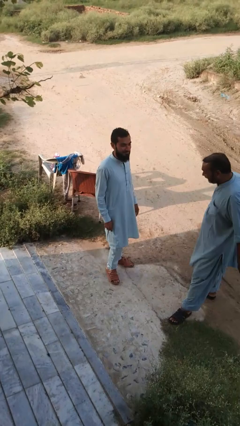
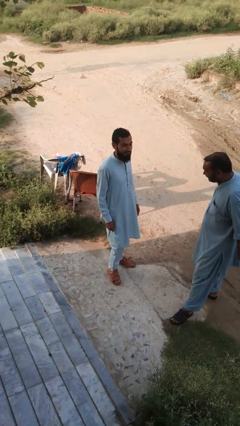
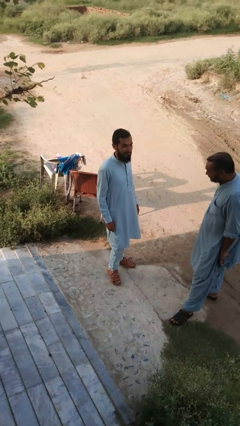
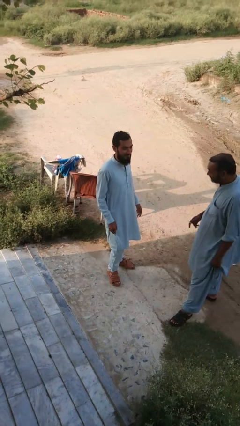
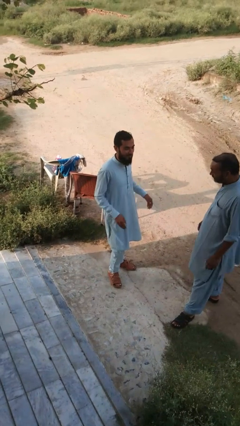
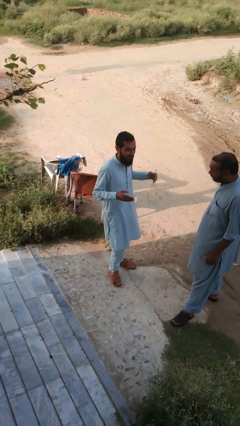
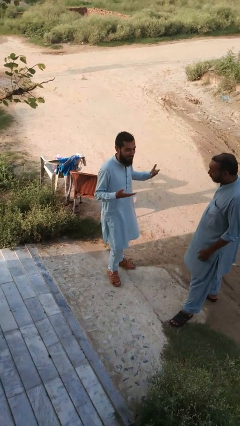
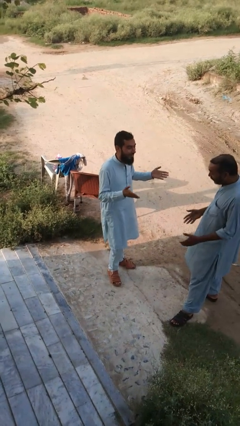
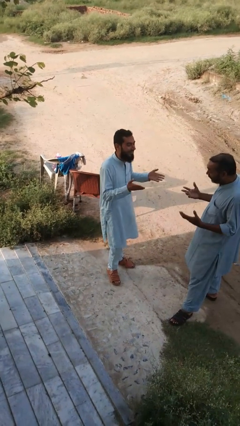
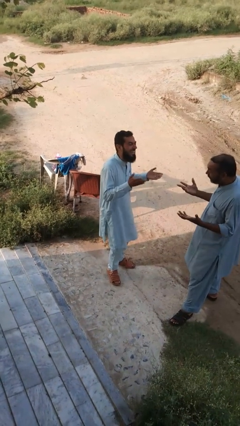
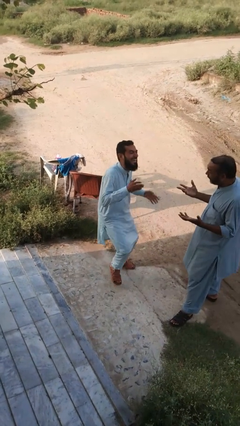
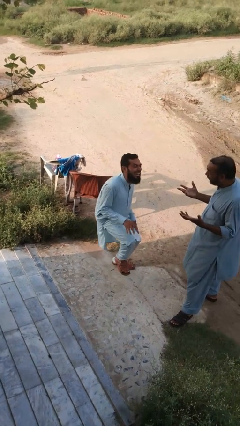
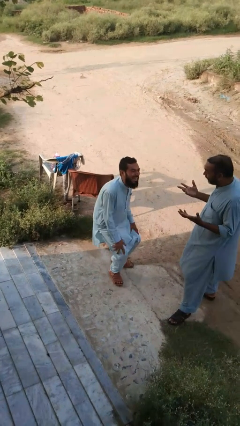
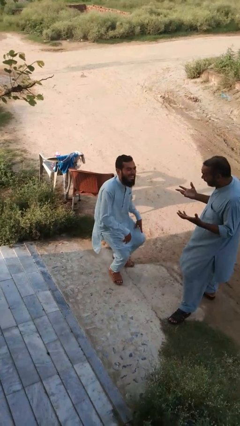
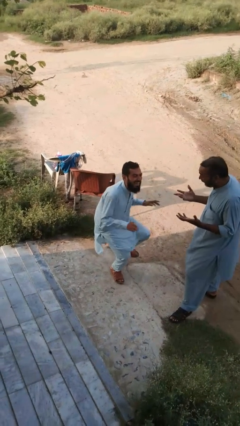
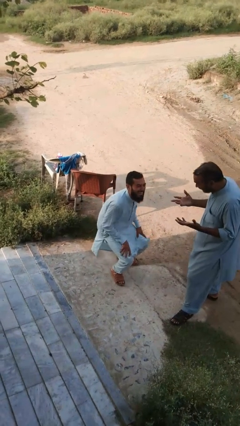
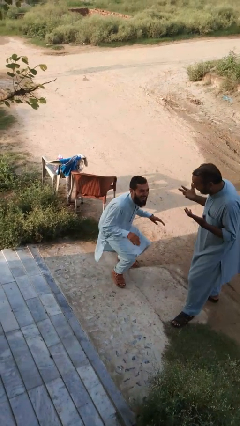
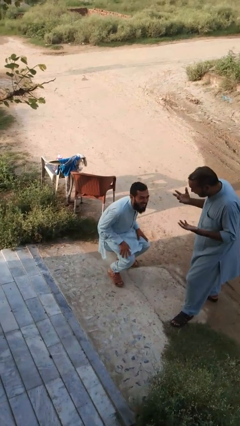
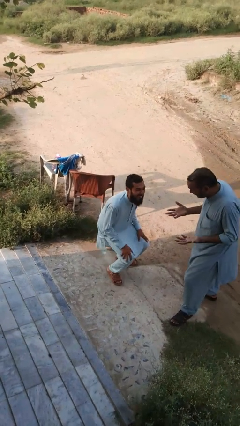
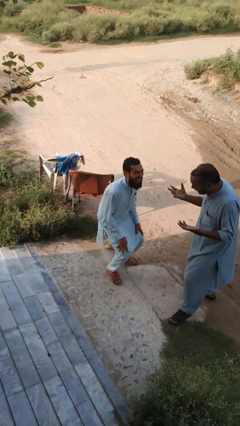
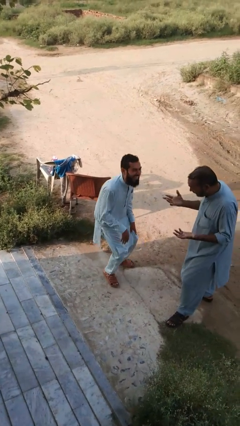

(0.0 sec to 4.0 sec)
person laughs with person

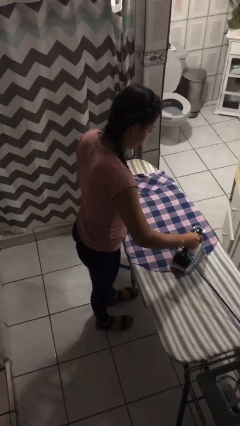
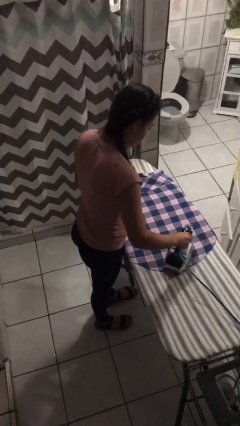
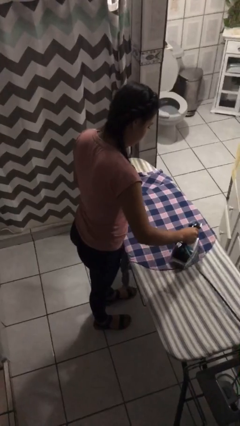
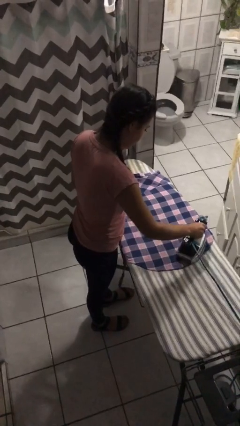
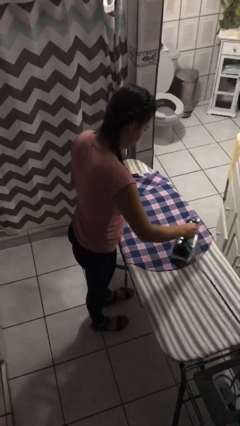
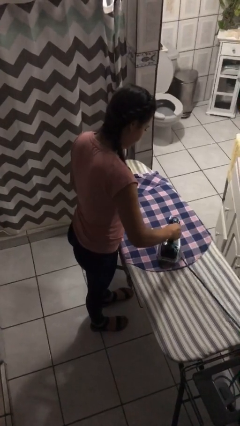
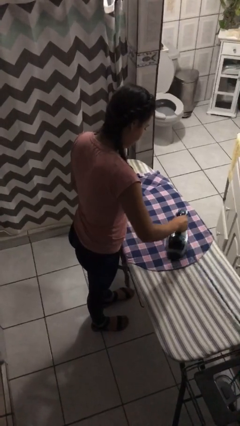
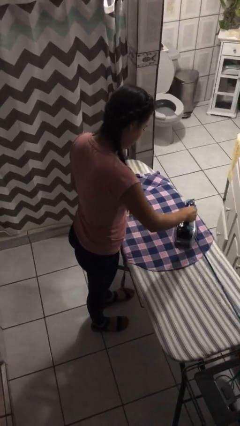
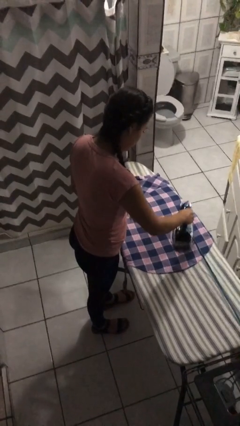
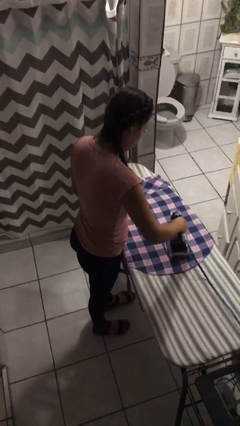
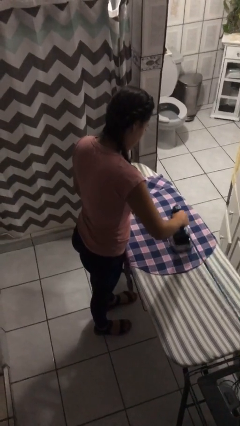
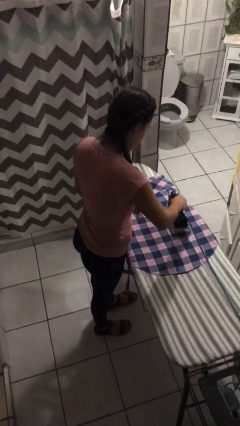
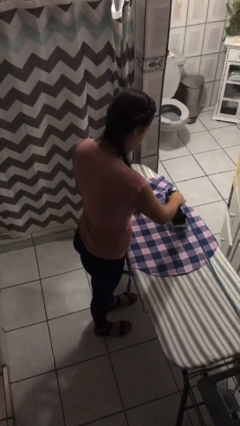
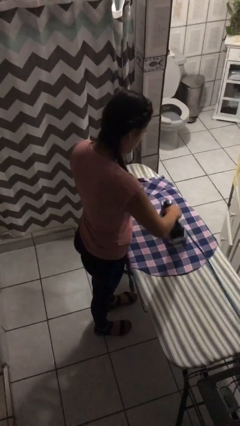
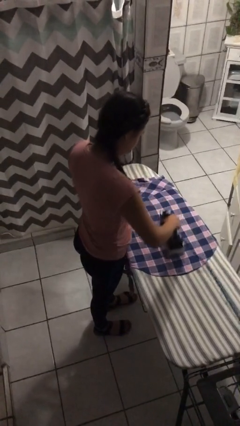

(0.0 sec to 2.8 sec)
person irons clothes

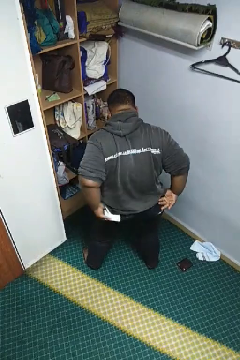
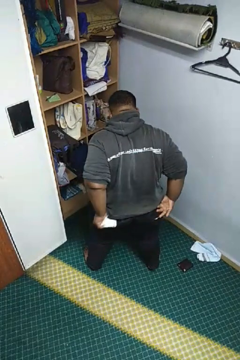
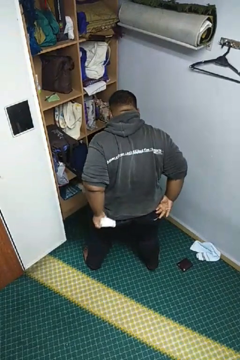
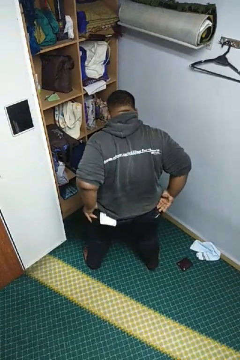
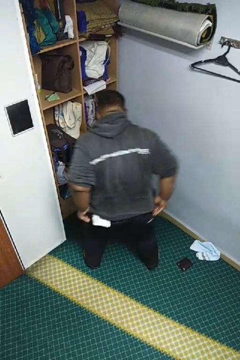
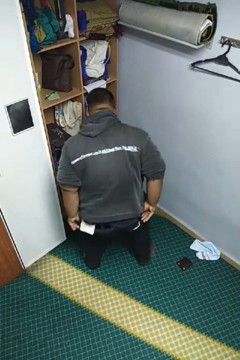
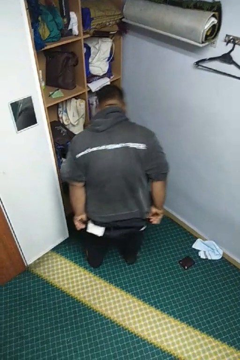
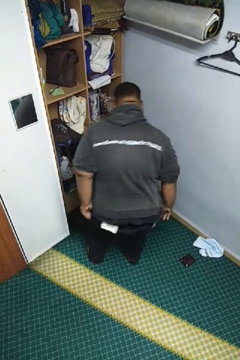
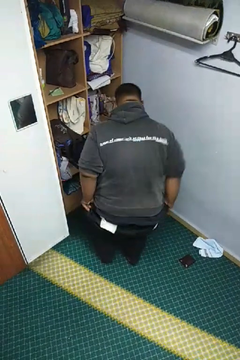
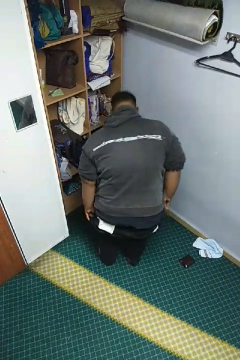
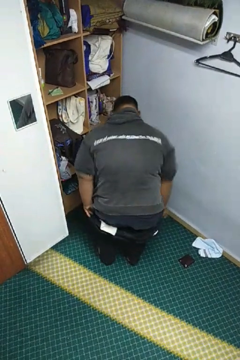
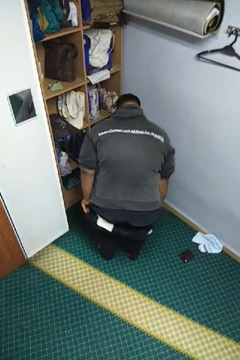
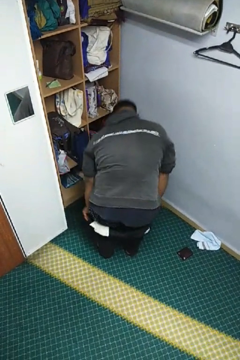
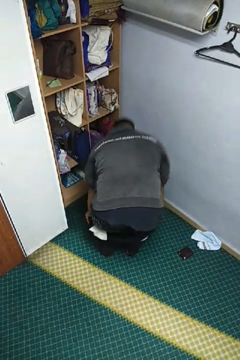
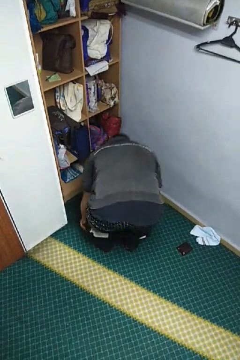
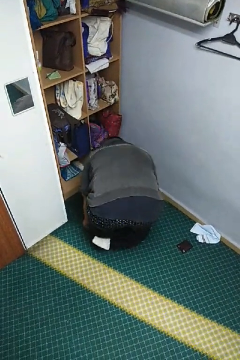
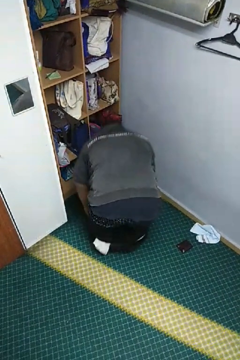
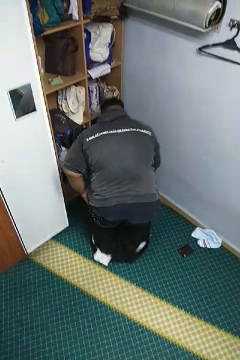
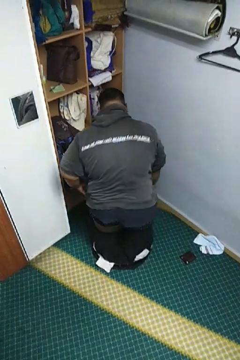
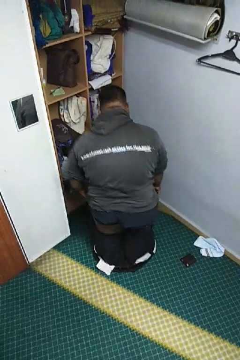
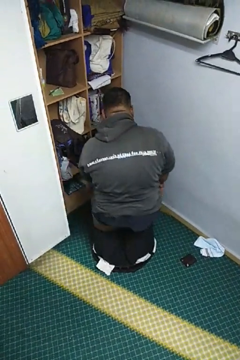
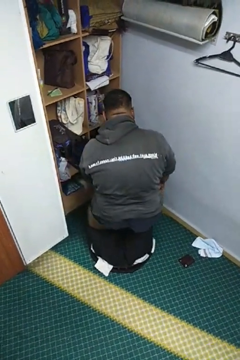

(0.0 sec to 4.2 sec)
person takes off pants

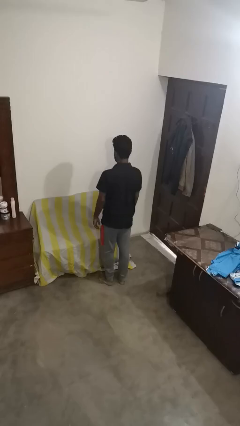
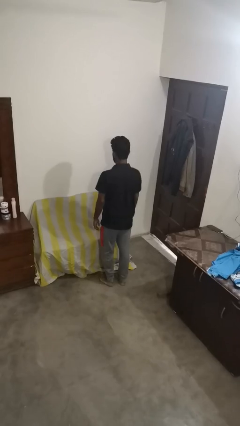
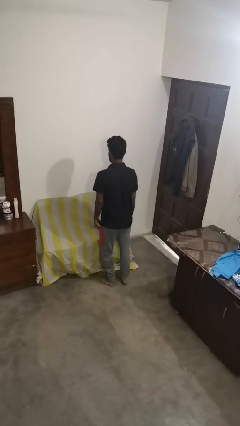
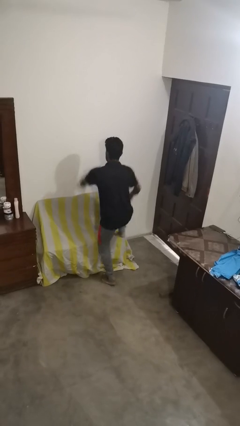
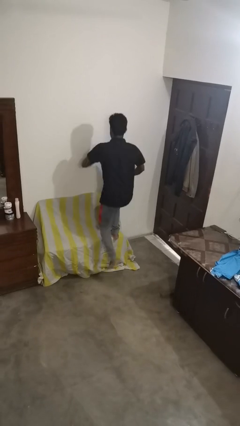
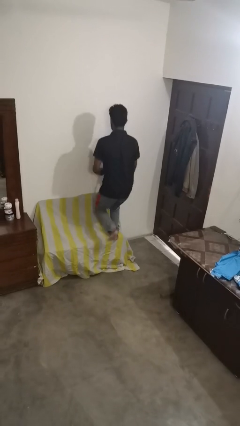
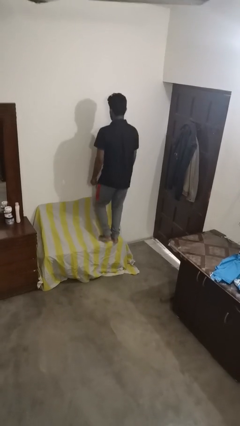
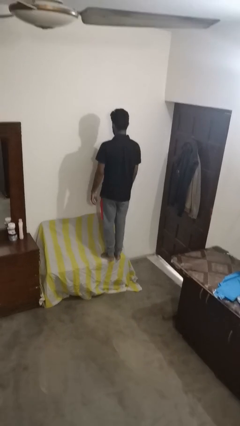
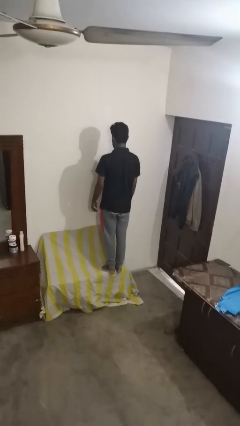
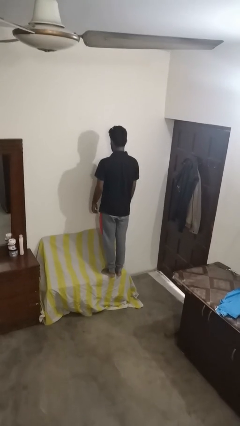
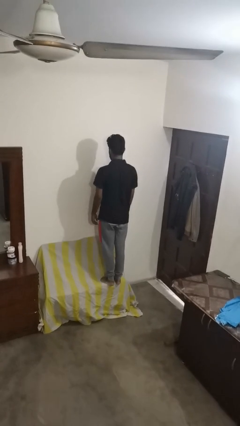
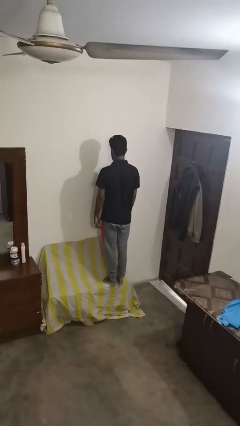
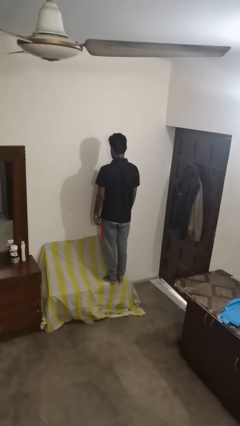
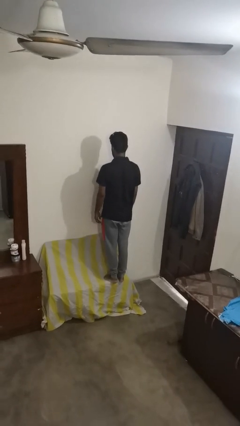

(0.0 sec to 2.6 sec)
person jumps on couch

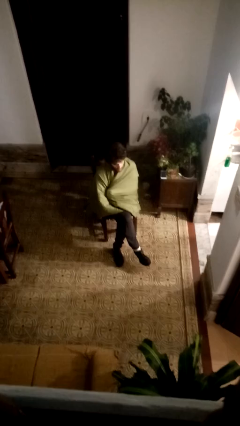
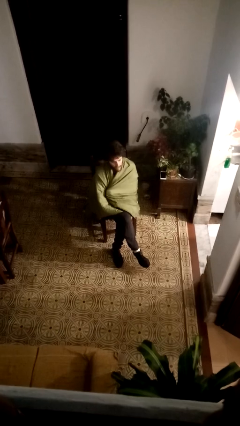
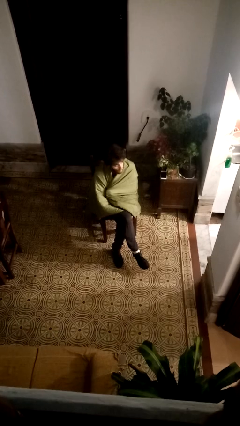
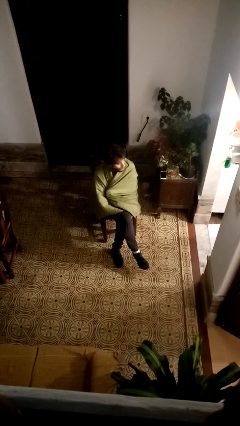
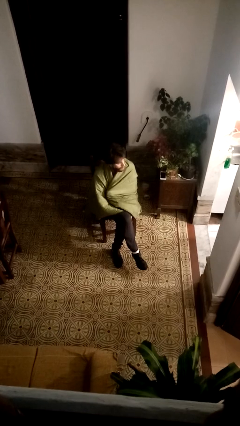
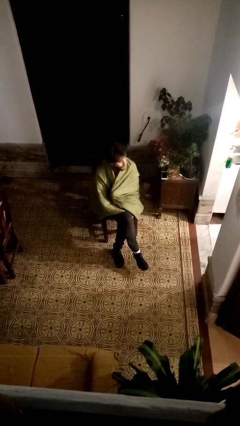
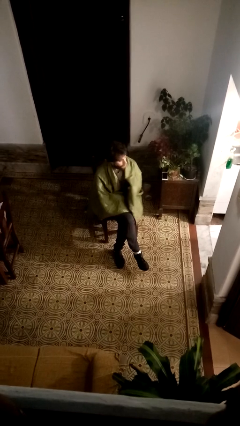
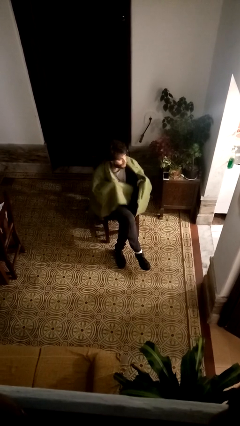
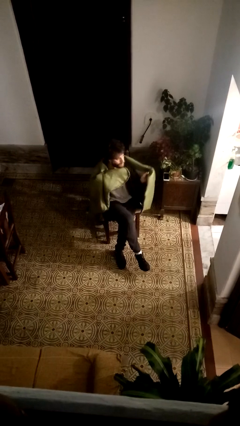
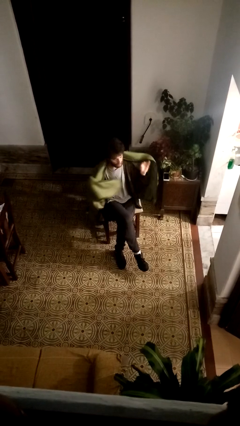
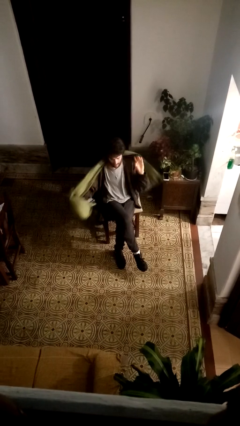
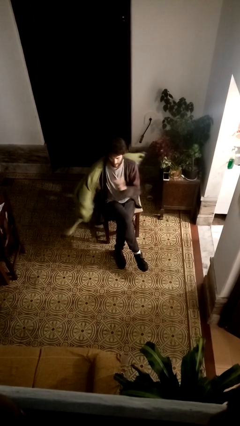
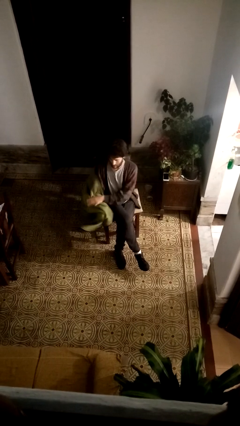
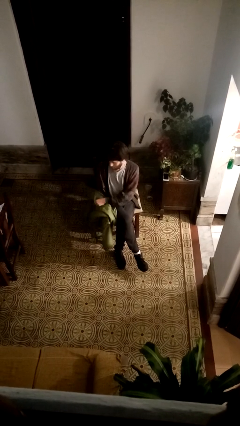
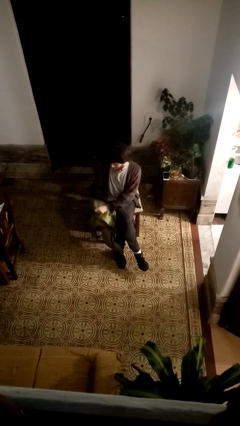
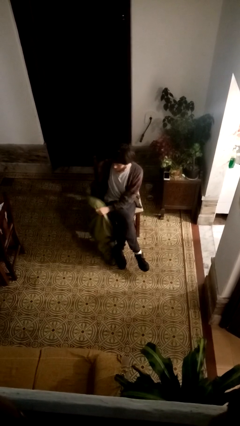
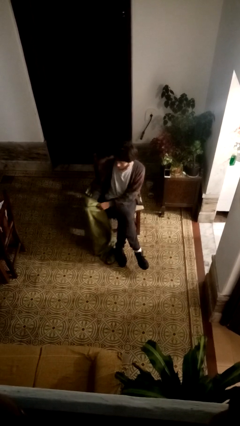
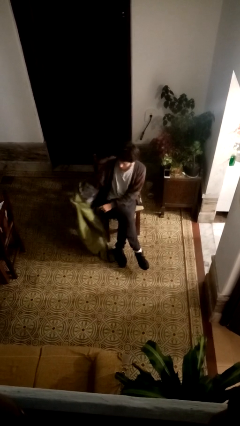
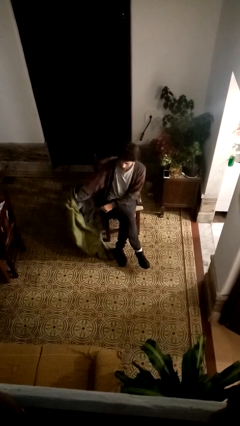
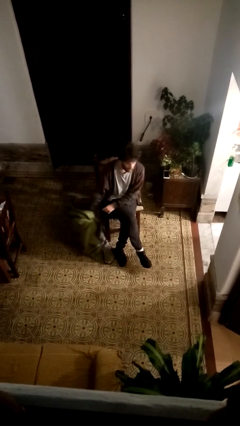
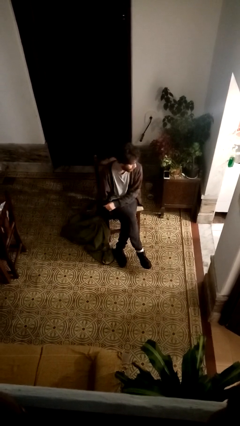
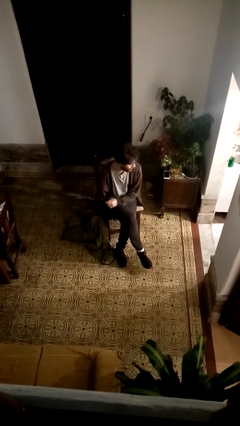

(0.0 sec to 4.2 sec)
person uncovers with blanket

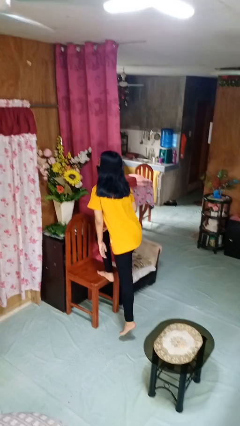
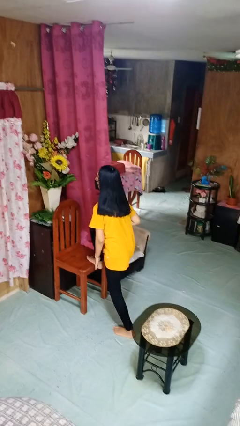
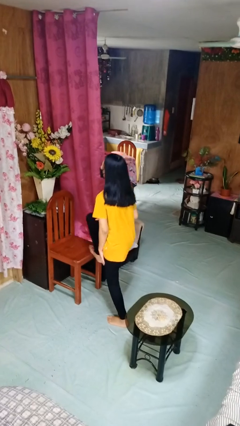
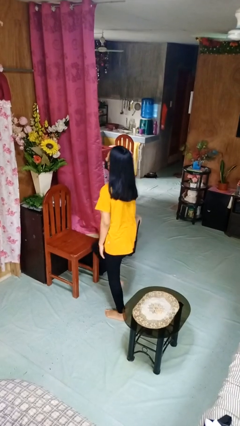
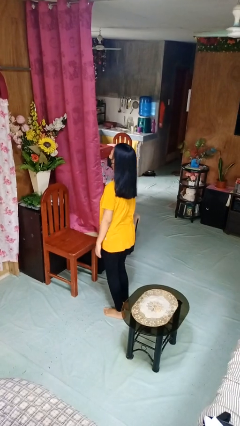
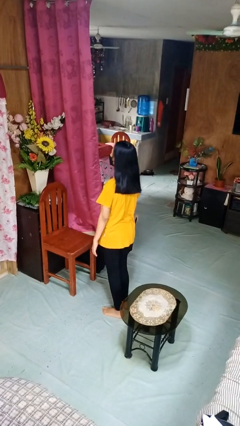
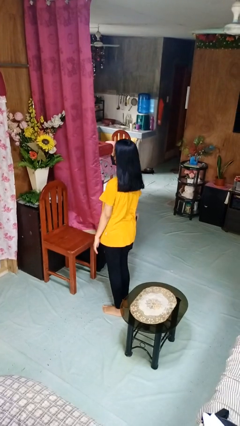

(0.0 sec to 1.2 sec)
person climbs off chair
